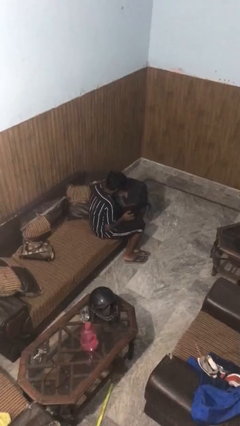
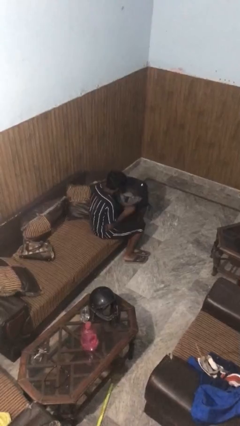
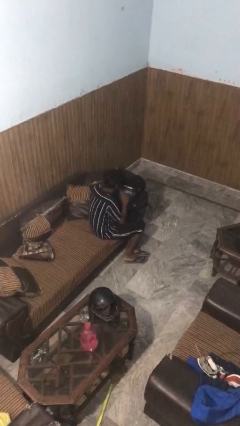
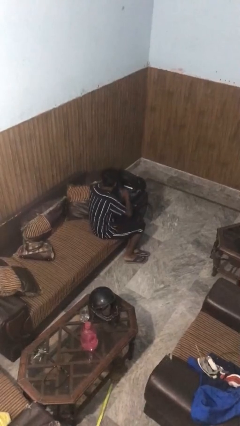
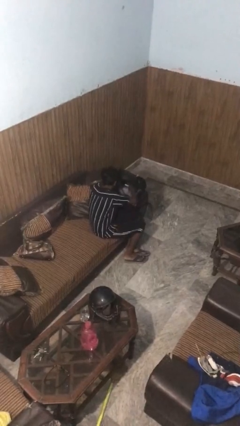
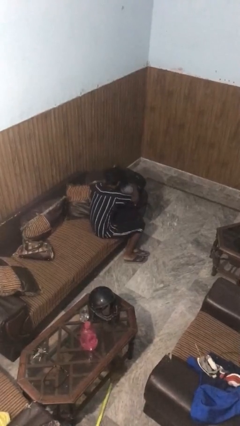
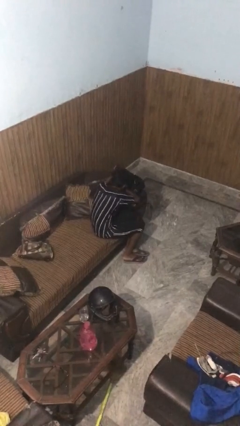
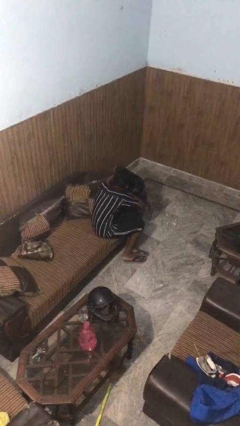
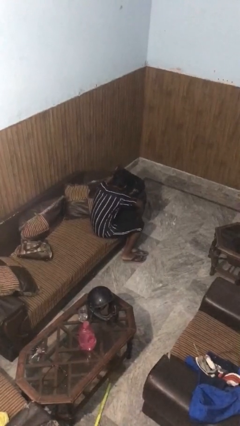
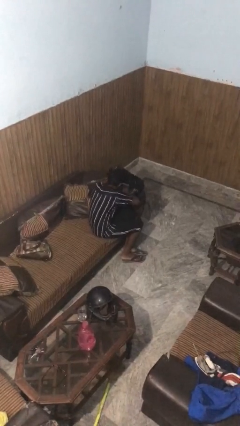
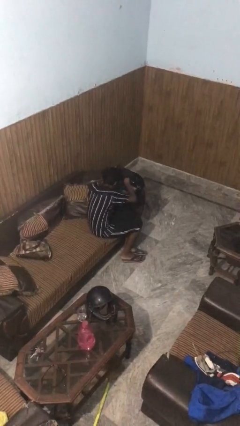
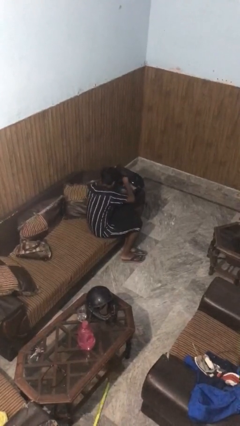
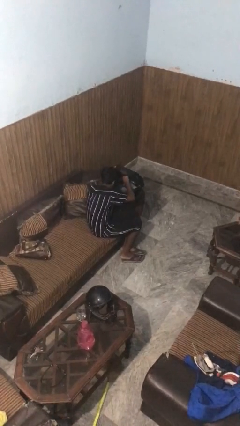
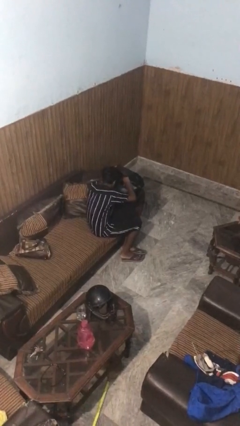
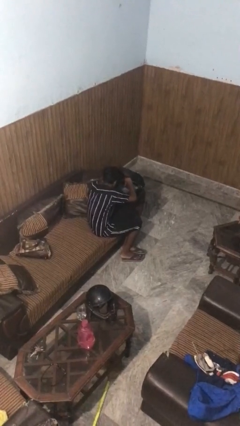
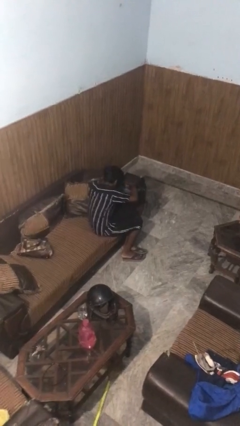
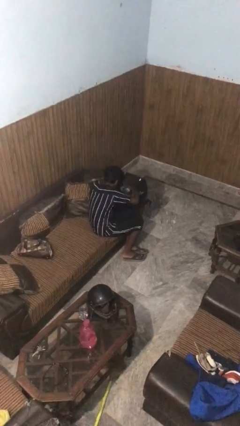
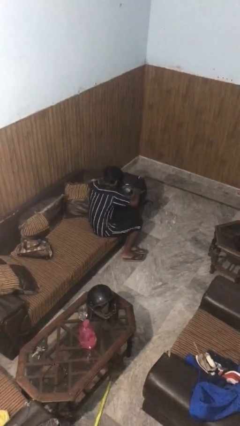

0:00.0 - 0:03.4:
person searches in backpack

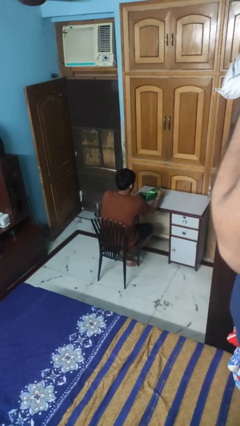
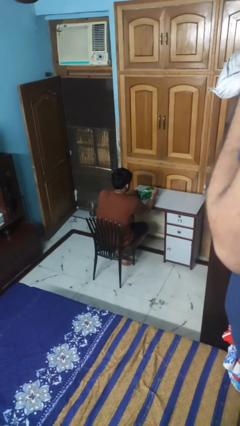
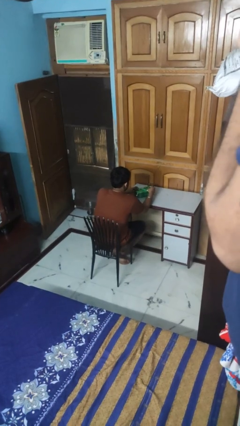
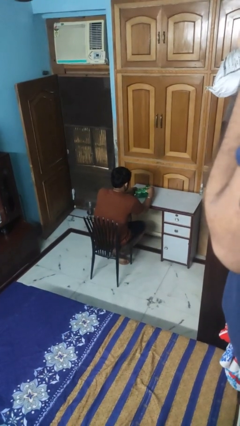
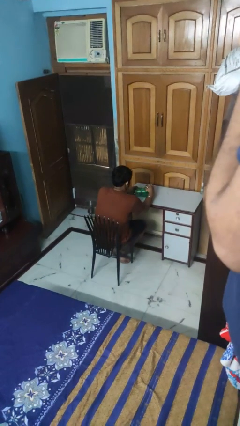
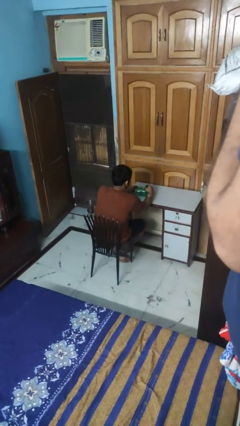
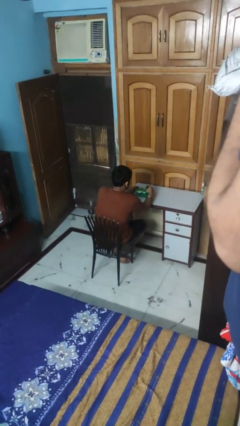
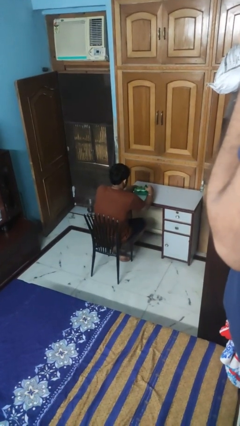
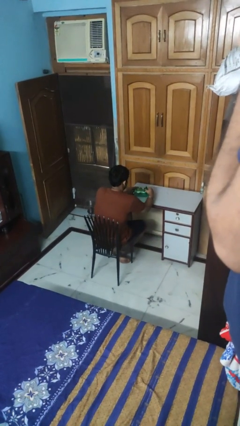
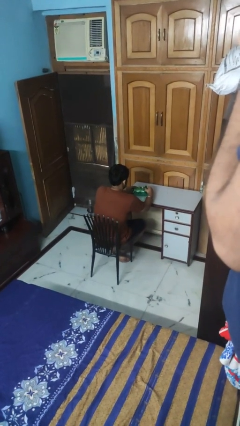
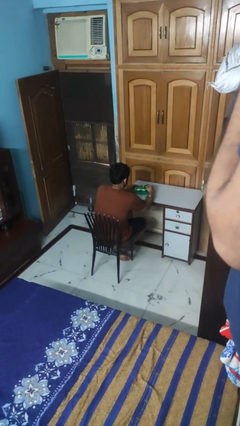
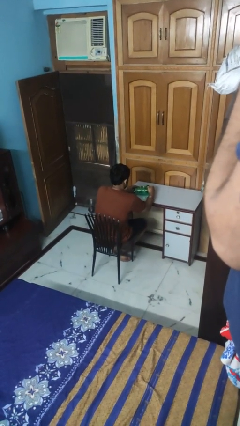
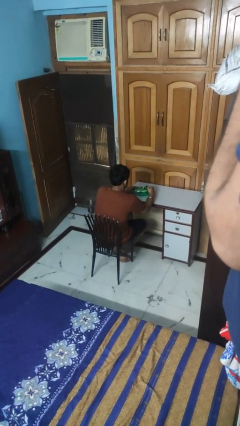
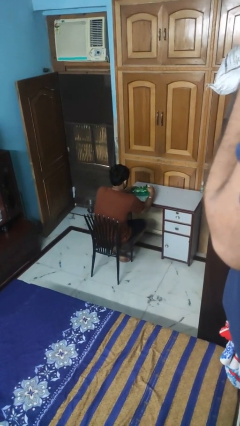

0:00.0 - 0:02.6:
person wraps box

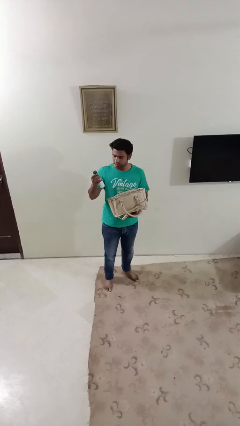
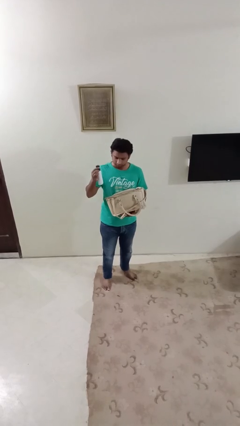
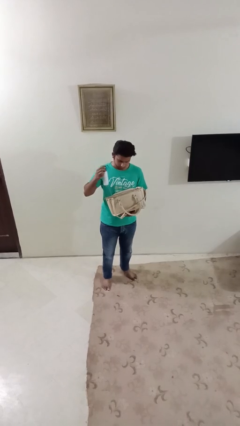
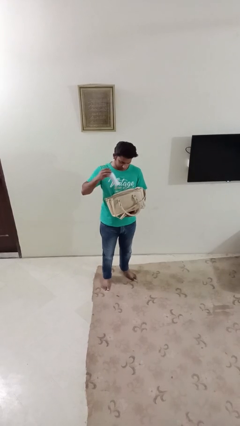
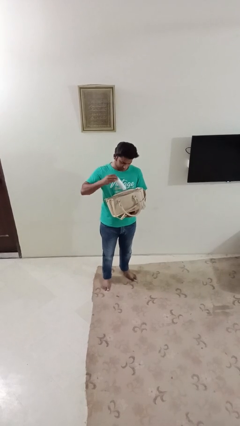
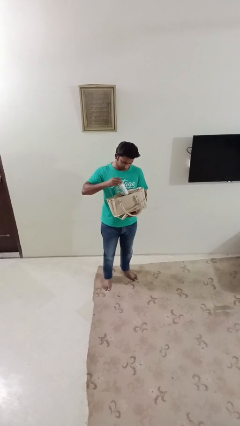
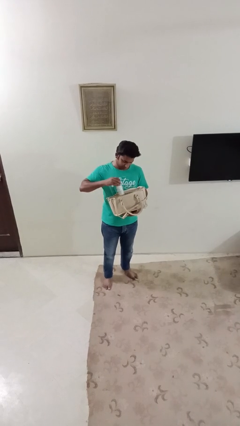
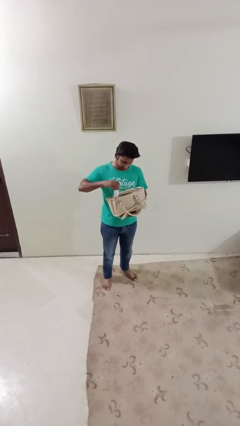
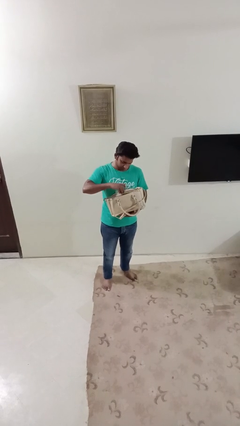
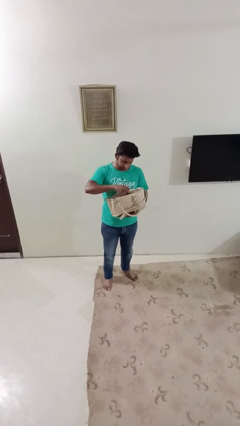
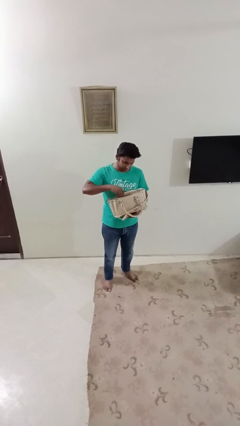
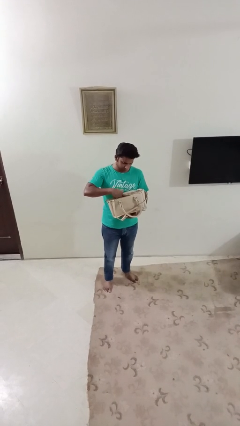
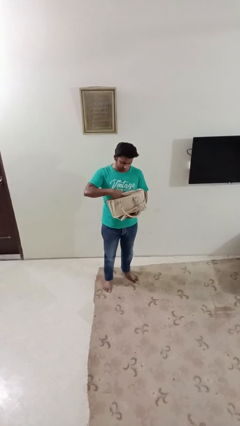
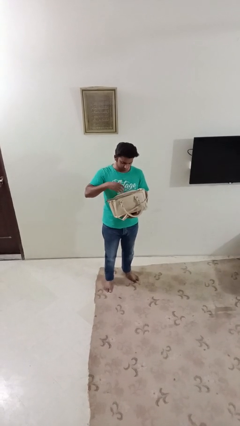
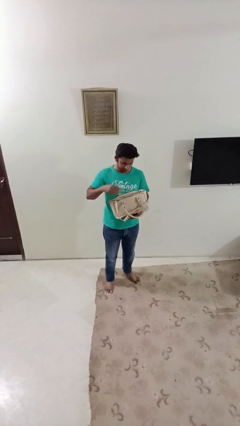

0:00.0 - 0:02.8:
person puts object into purse

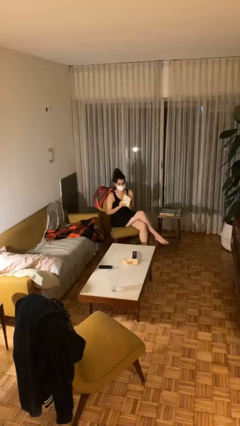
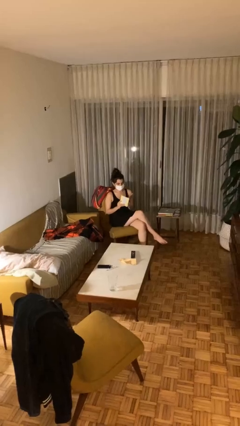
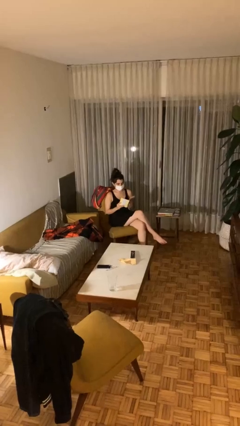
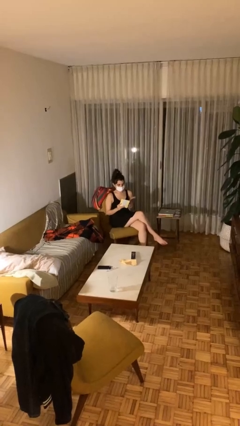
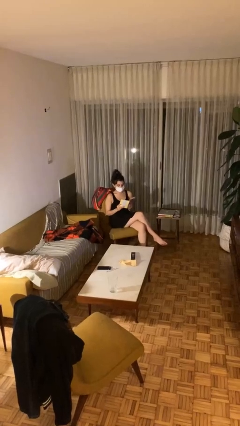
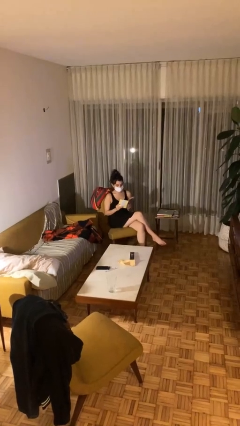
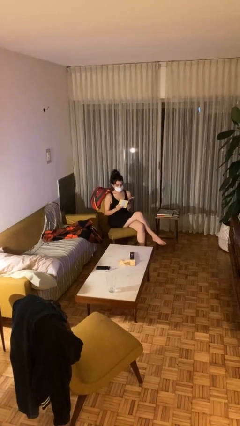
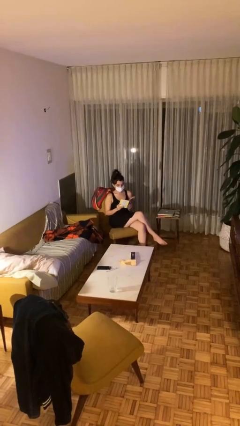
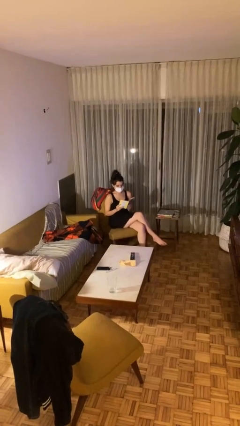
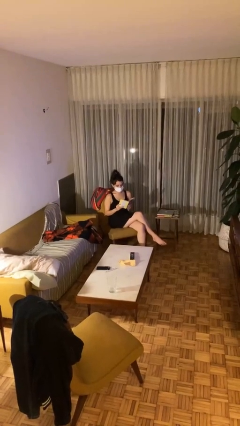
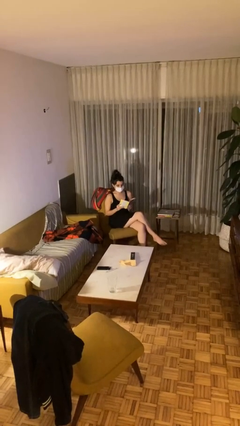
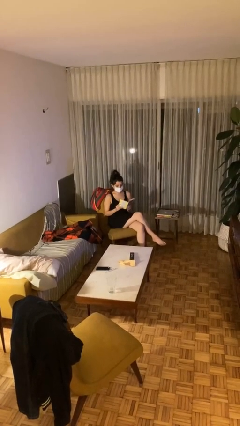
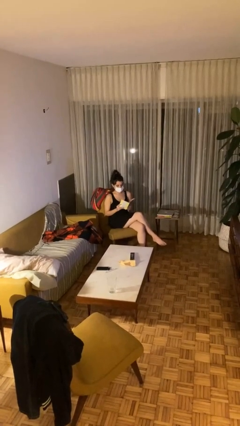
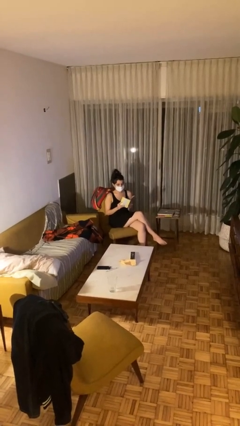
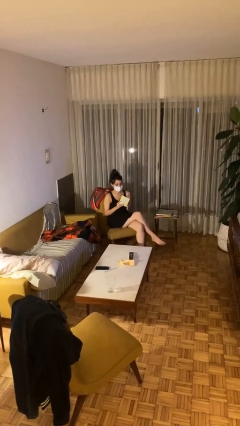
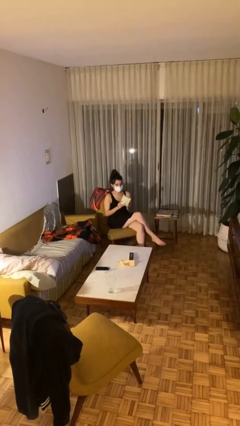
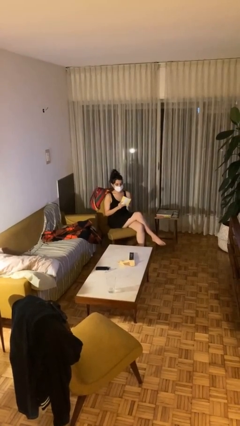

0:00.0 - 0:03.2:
person reads document

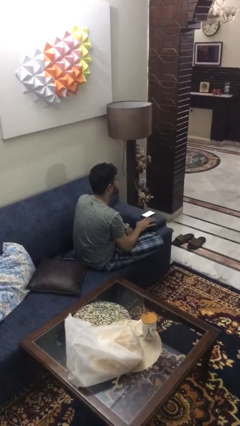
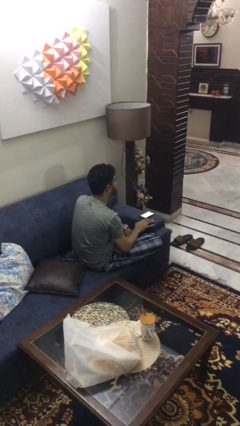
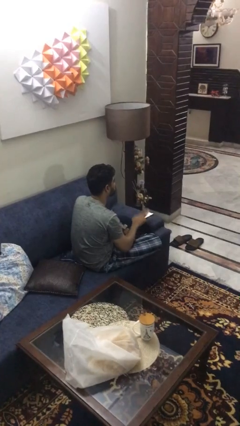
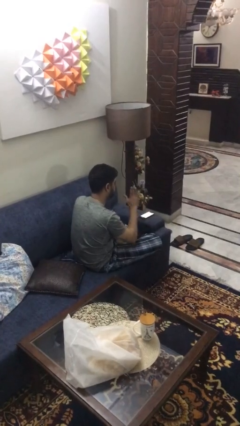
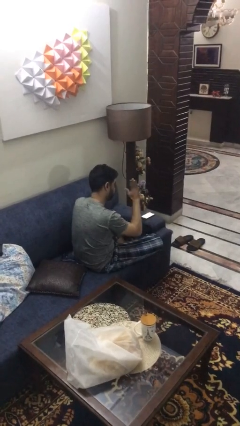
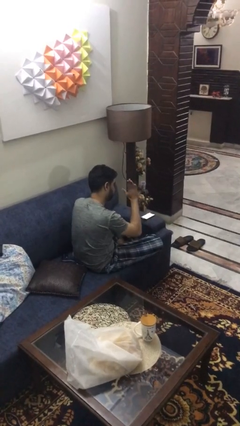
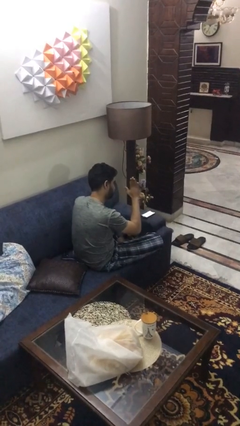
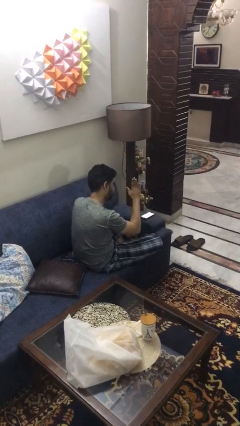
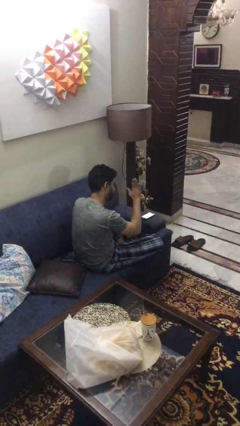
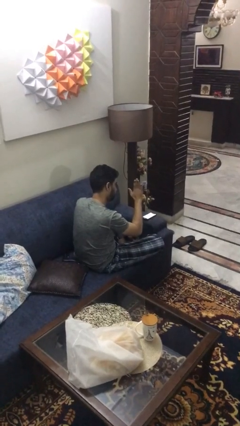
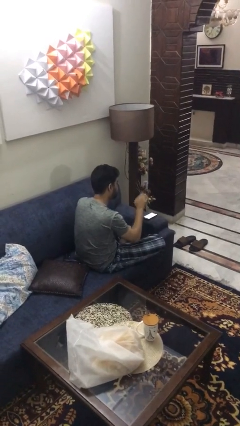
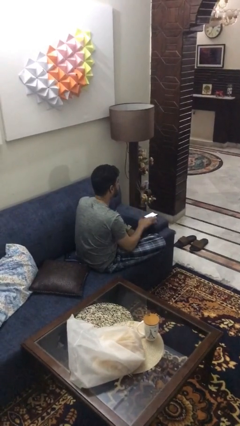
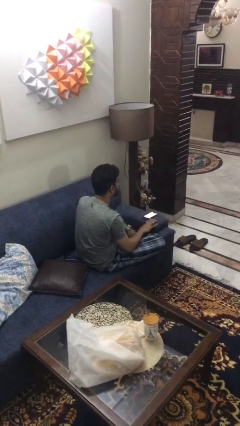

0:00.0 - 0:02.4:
person gestures stop

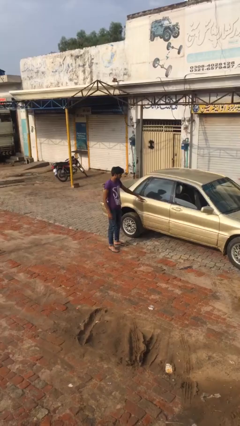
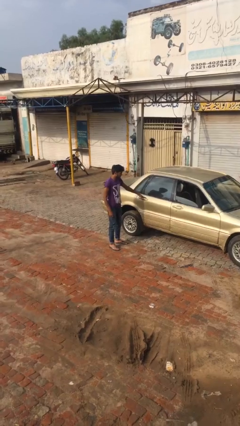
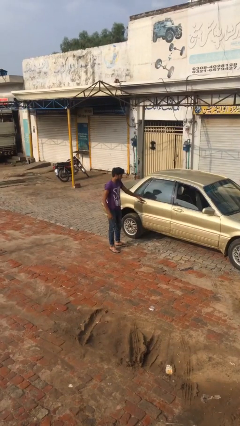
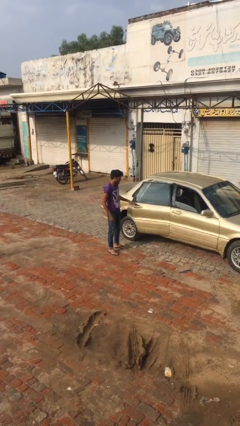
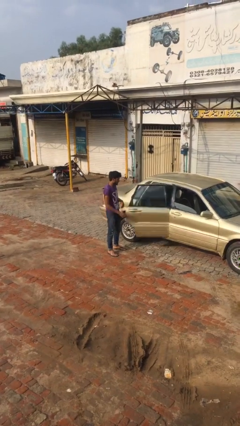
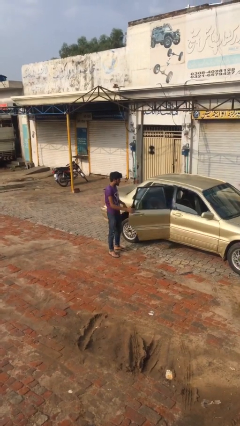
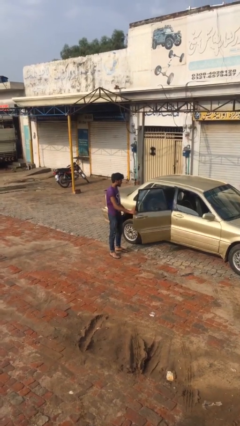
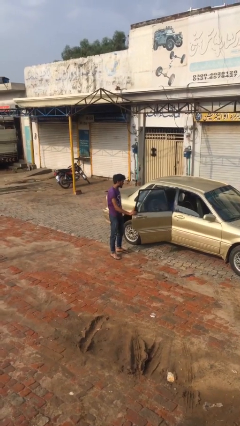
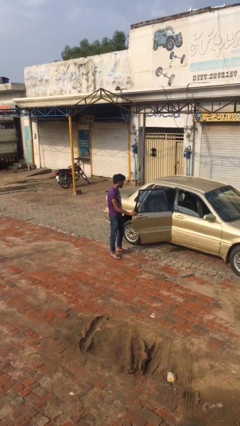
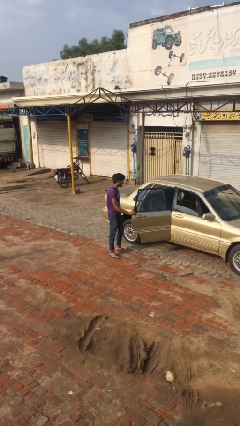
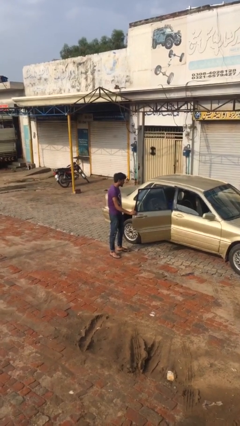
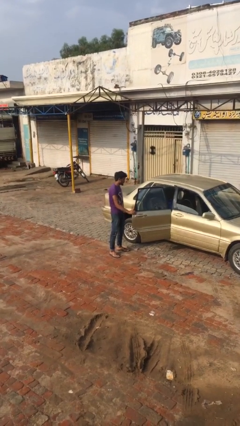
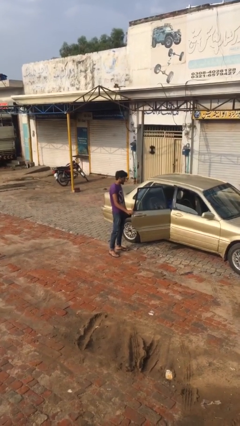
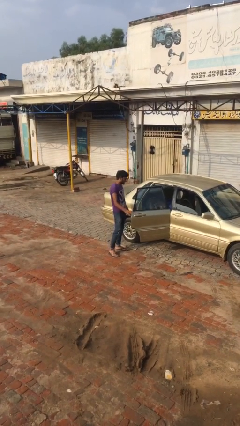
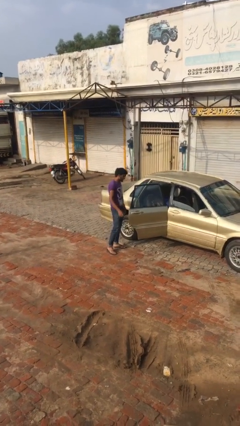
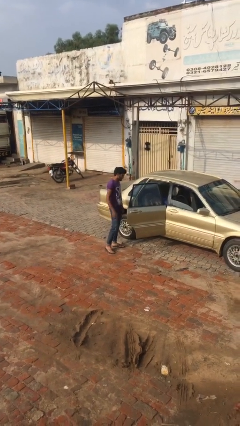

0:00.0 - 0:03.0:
person opens car door
